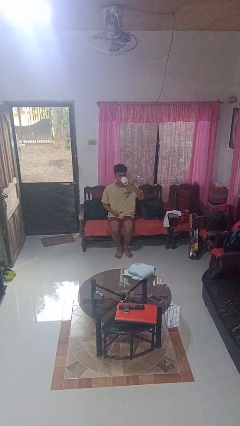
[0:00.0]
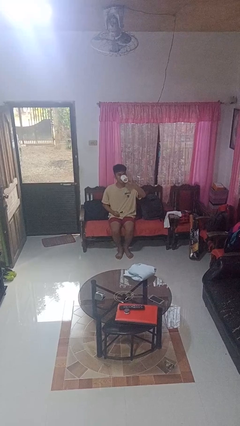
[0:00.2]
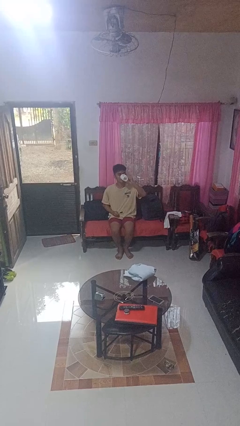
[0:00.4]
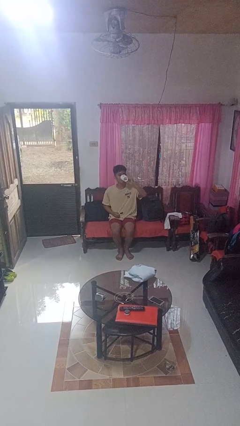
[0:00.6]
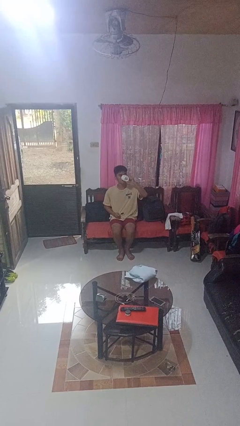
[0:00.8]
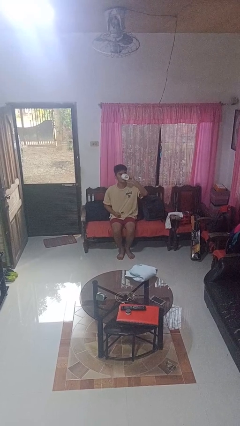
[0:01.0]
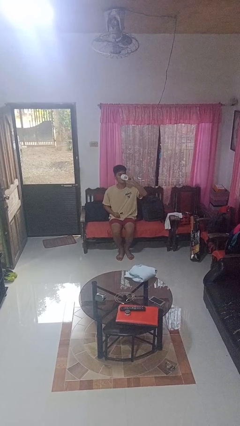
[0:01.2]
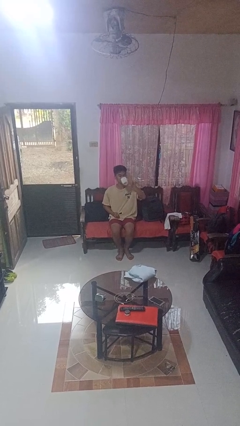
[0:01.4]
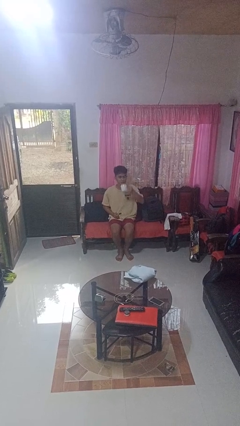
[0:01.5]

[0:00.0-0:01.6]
person drinks from mug

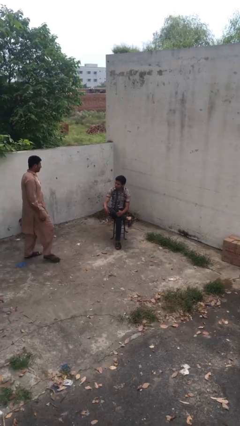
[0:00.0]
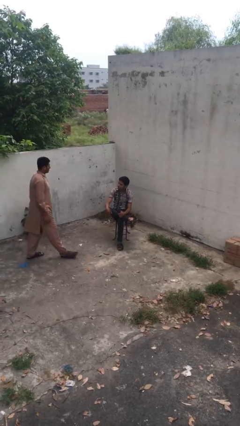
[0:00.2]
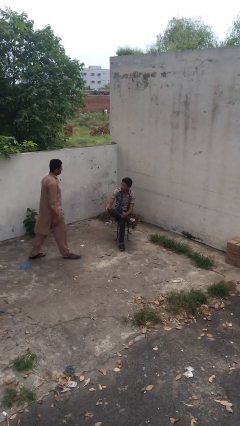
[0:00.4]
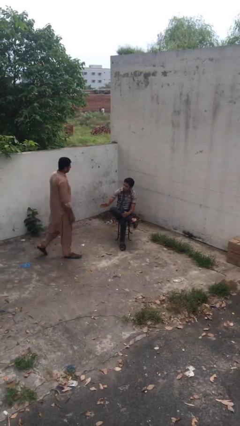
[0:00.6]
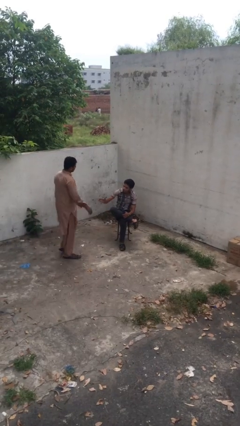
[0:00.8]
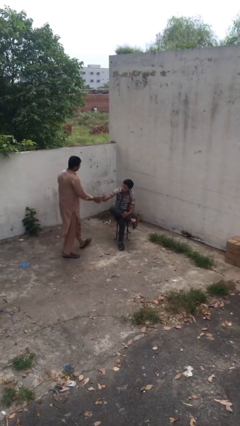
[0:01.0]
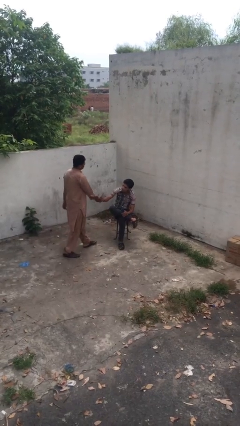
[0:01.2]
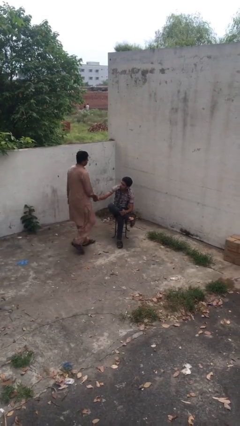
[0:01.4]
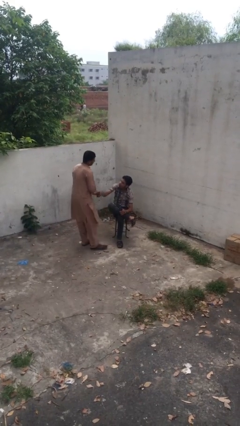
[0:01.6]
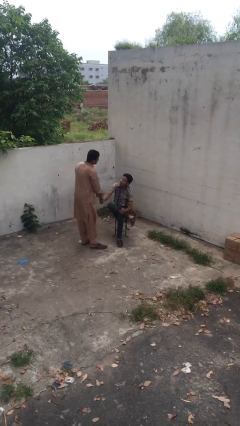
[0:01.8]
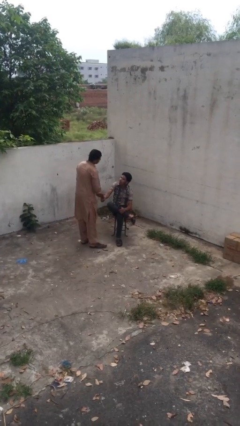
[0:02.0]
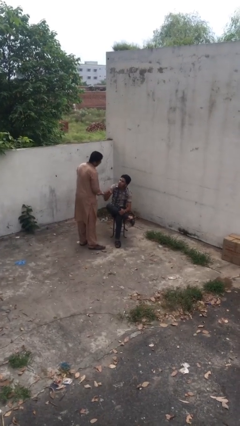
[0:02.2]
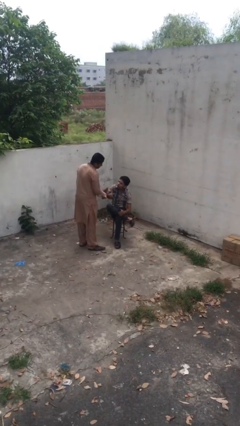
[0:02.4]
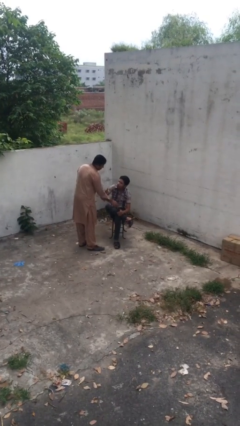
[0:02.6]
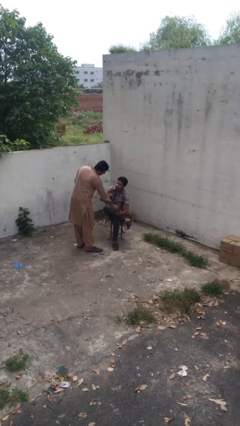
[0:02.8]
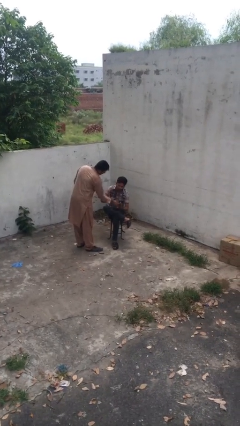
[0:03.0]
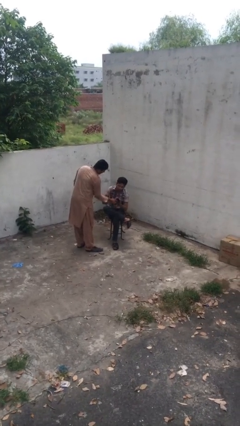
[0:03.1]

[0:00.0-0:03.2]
person shakes hand

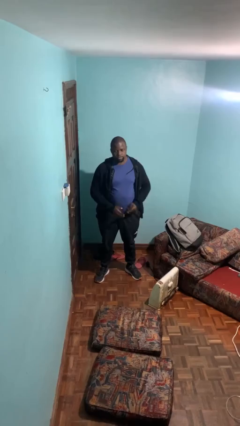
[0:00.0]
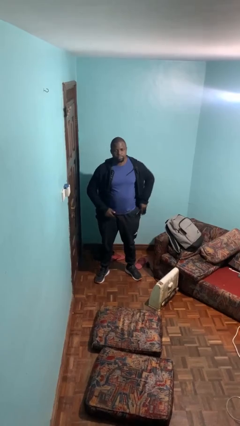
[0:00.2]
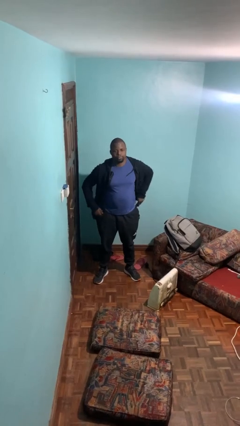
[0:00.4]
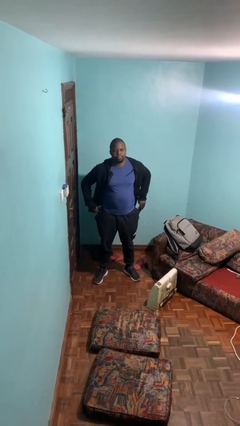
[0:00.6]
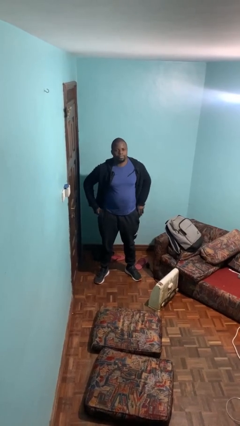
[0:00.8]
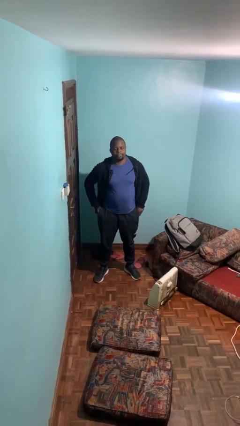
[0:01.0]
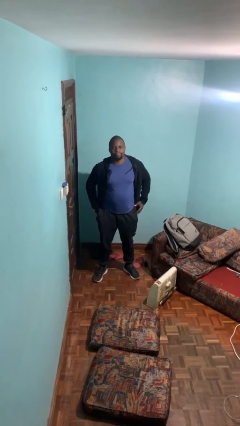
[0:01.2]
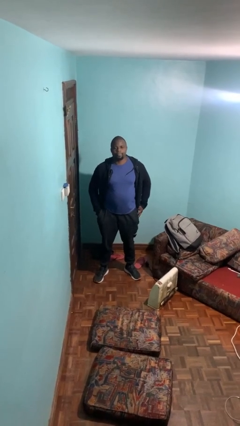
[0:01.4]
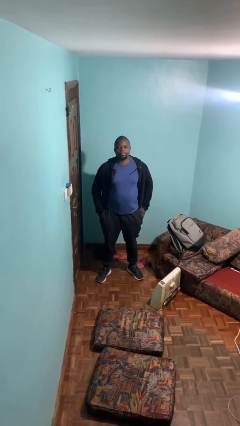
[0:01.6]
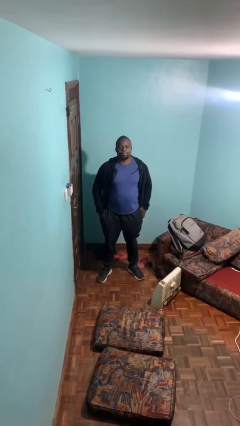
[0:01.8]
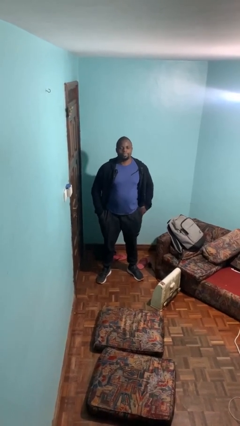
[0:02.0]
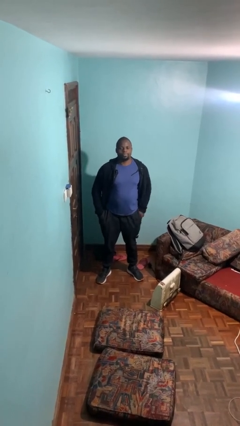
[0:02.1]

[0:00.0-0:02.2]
person puts phone into pocket

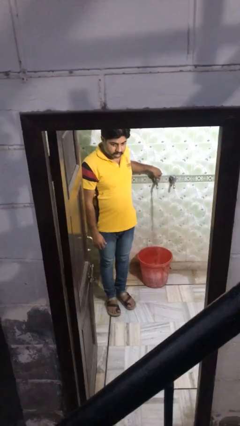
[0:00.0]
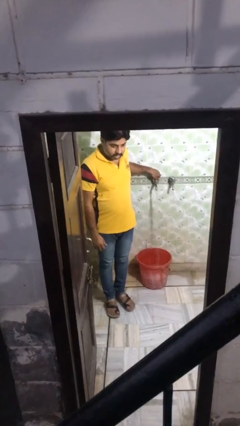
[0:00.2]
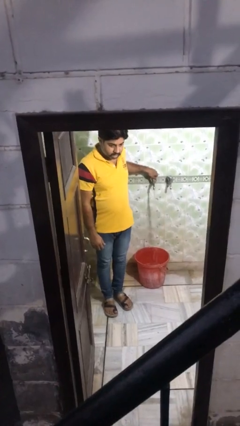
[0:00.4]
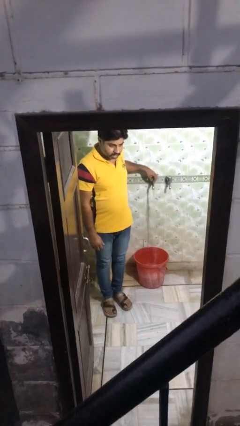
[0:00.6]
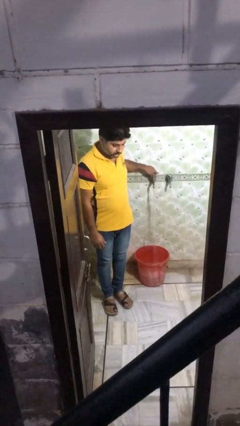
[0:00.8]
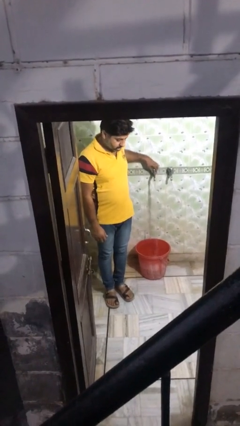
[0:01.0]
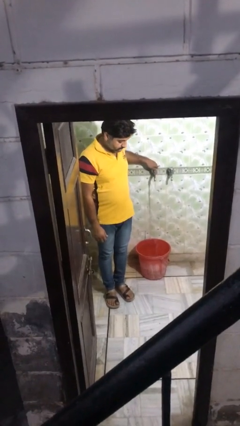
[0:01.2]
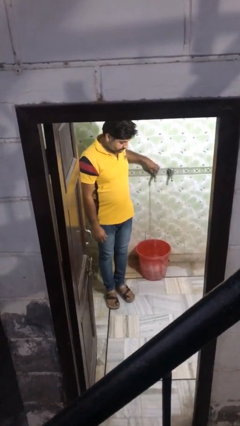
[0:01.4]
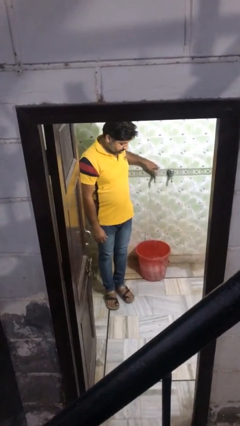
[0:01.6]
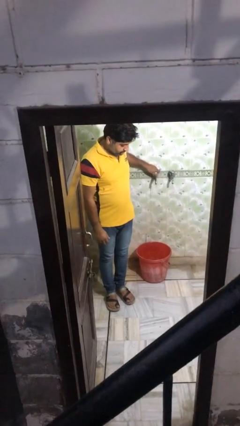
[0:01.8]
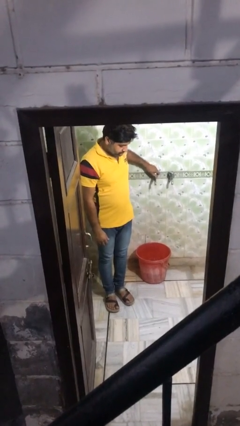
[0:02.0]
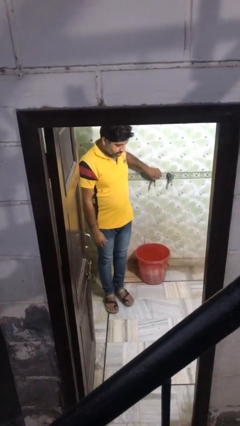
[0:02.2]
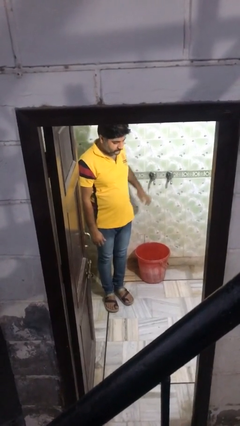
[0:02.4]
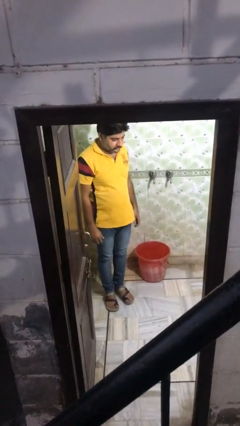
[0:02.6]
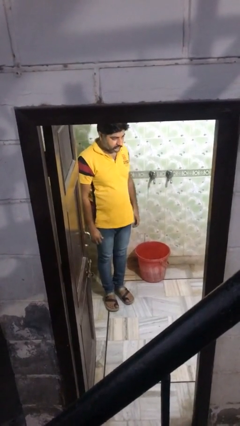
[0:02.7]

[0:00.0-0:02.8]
person turns off faucet

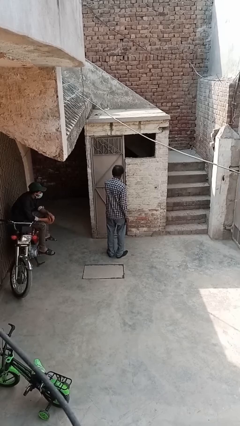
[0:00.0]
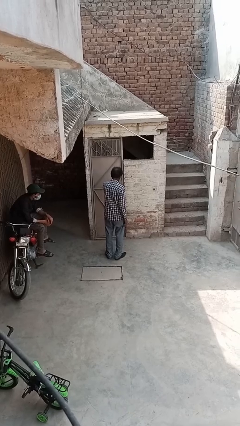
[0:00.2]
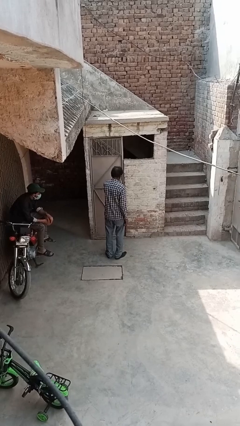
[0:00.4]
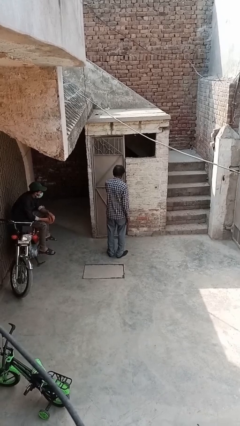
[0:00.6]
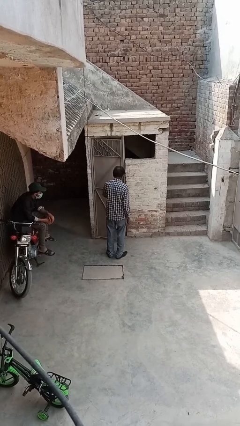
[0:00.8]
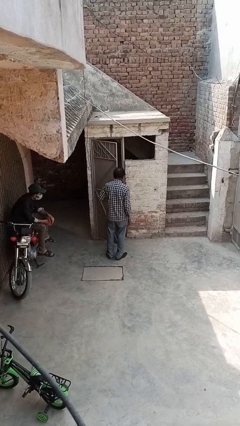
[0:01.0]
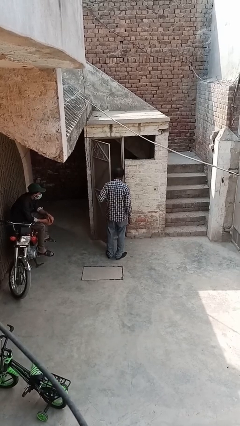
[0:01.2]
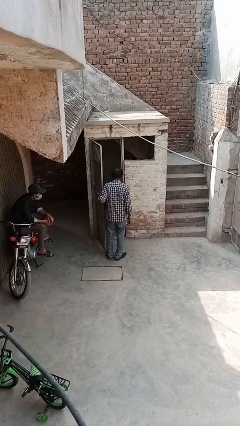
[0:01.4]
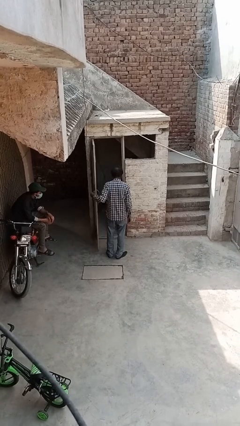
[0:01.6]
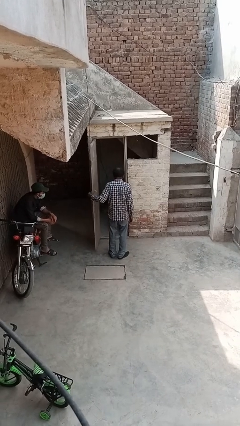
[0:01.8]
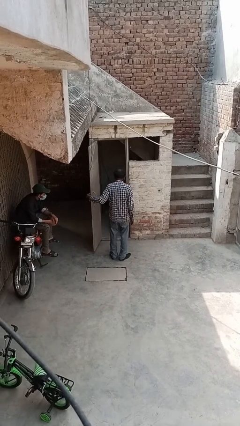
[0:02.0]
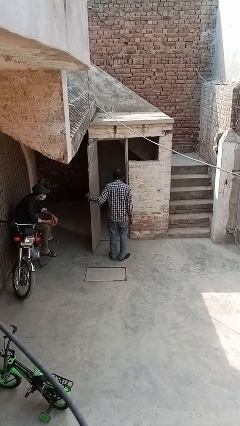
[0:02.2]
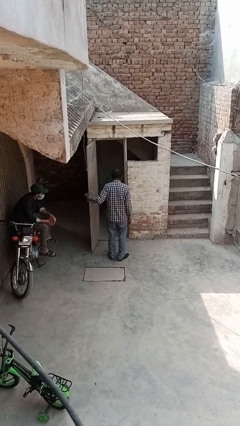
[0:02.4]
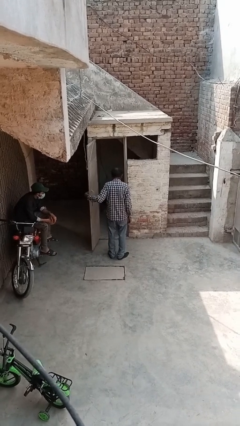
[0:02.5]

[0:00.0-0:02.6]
person opens facility door

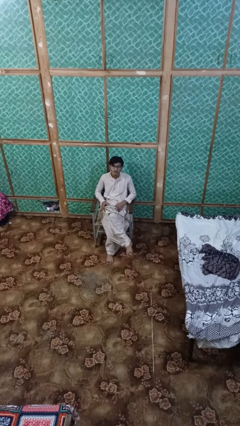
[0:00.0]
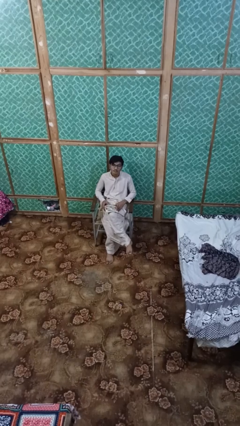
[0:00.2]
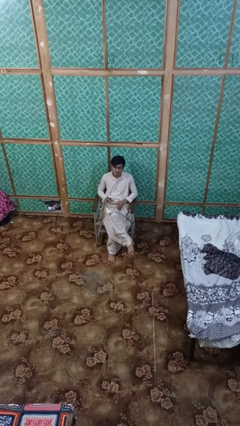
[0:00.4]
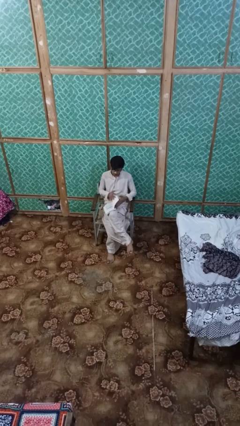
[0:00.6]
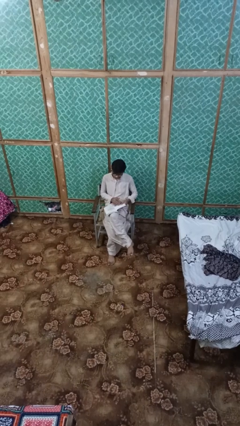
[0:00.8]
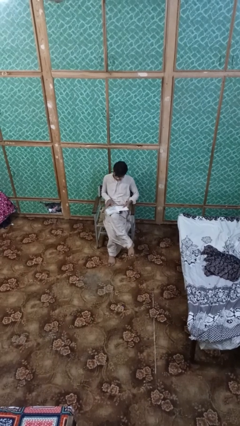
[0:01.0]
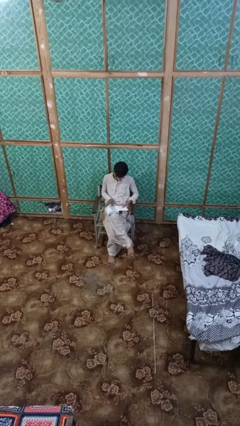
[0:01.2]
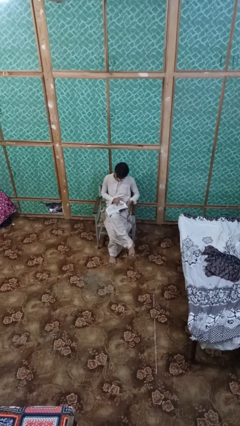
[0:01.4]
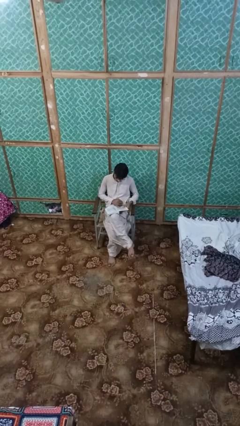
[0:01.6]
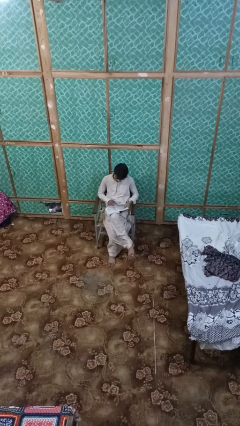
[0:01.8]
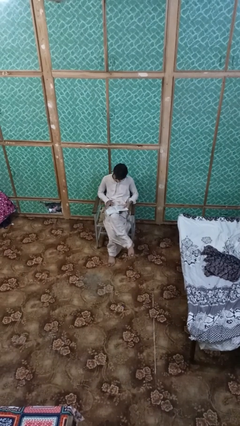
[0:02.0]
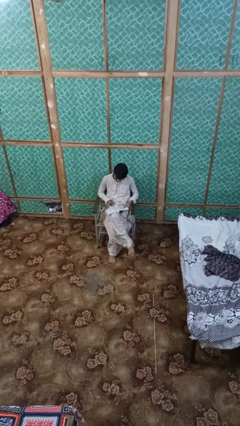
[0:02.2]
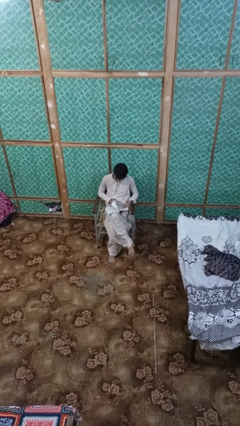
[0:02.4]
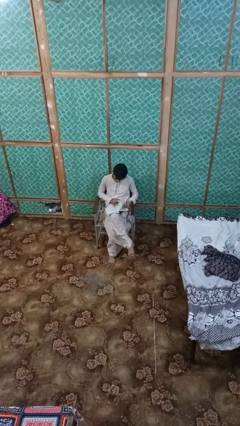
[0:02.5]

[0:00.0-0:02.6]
person reads book

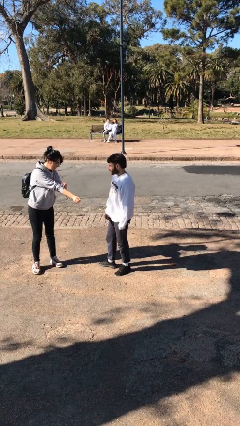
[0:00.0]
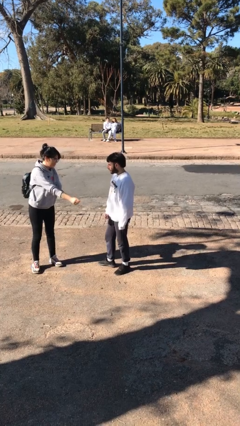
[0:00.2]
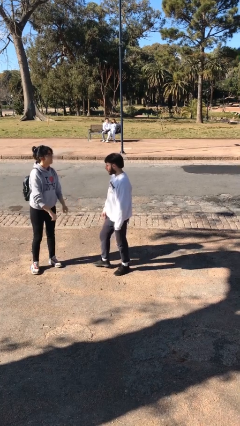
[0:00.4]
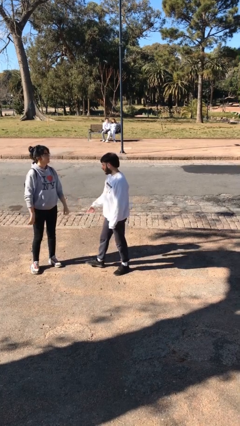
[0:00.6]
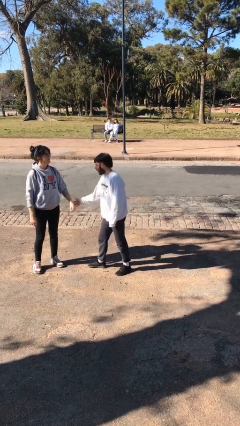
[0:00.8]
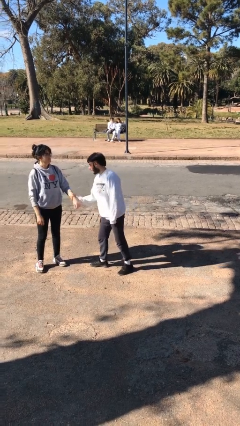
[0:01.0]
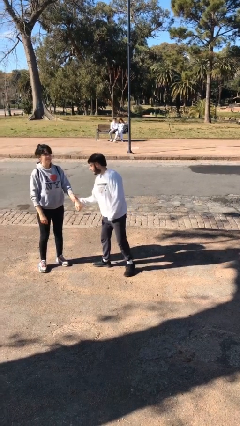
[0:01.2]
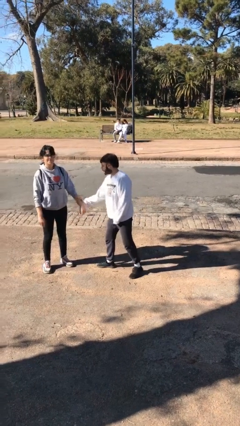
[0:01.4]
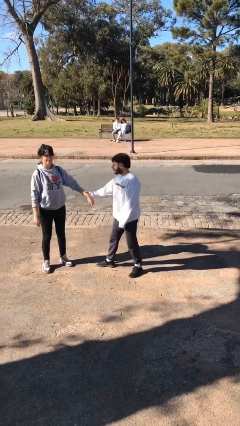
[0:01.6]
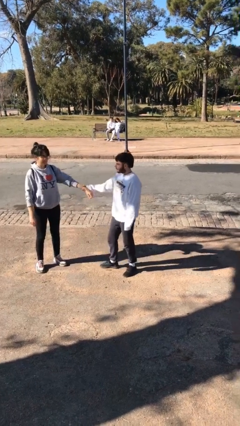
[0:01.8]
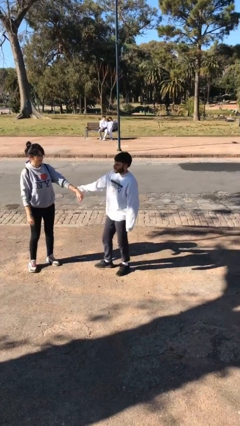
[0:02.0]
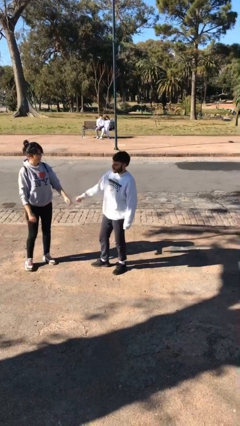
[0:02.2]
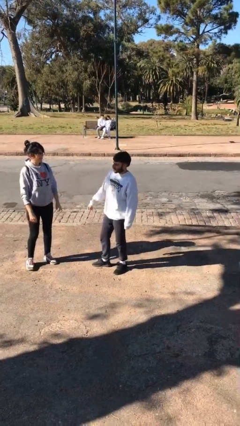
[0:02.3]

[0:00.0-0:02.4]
person grabs person by forearm
